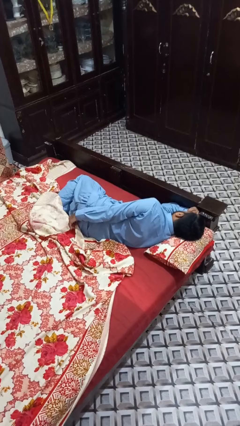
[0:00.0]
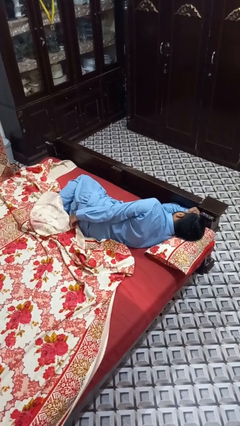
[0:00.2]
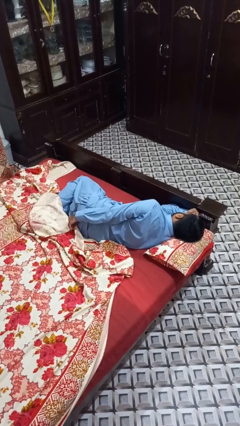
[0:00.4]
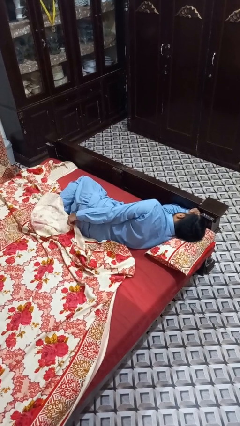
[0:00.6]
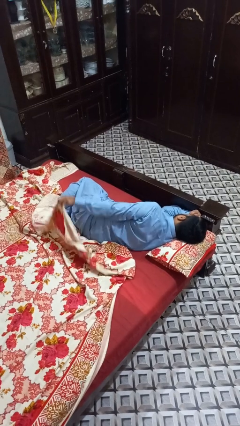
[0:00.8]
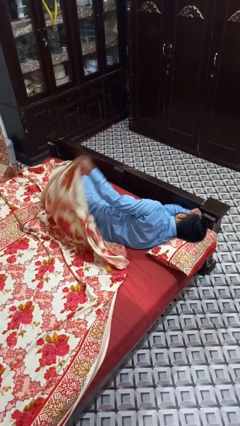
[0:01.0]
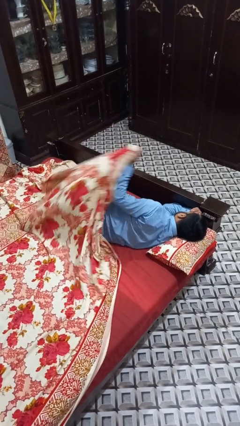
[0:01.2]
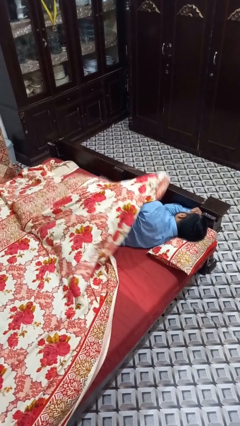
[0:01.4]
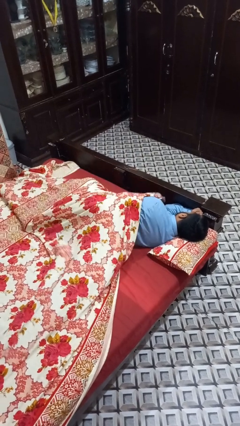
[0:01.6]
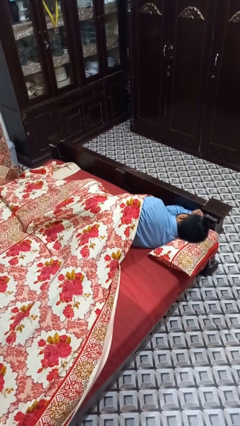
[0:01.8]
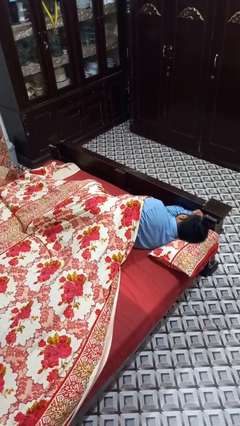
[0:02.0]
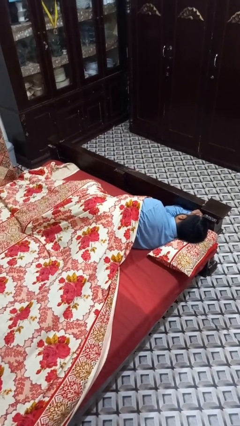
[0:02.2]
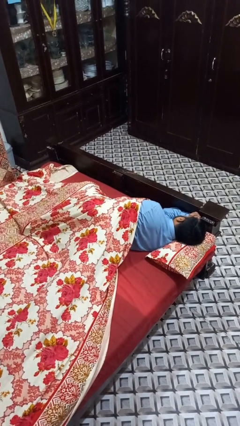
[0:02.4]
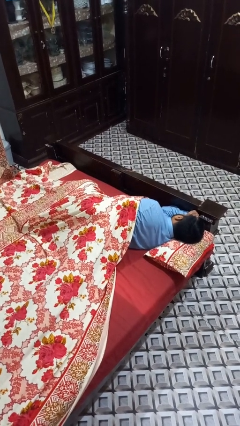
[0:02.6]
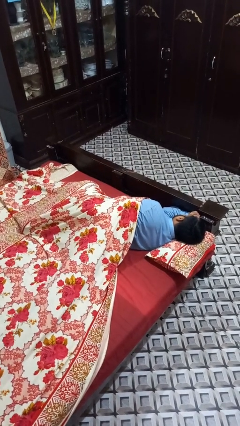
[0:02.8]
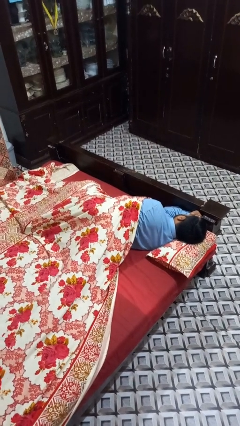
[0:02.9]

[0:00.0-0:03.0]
person covers with bedsheets

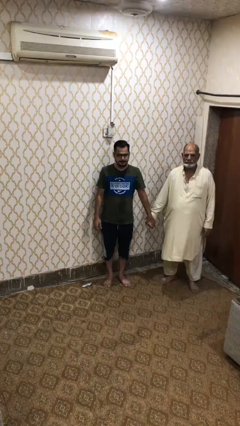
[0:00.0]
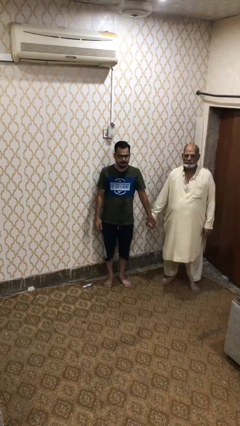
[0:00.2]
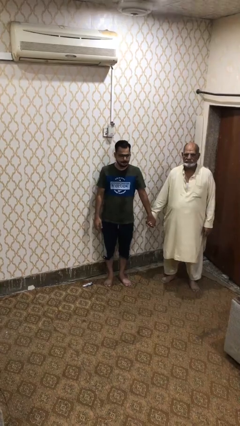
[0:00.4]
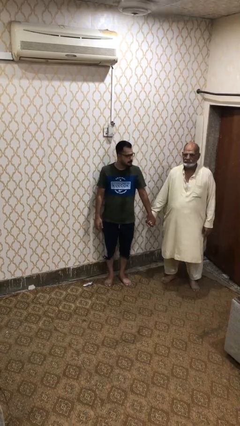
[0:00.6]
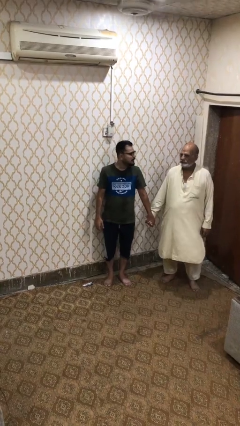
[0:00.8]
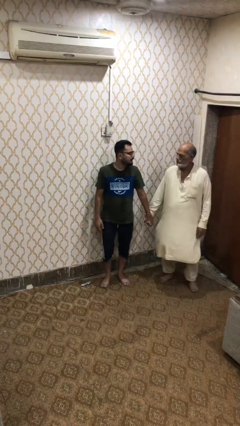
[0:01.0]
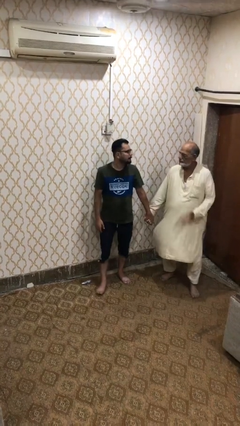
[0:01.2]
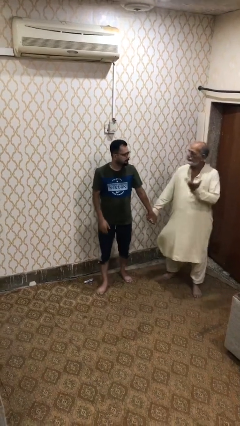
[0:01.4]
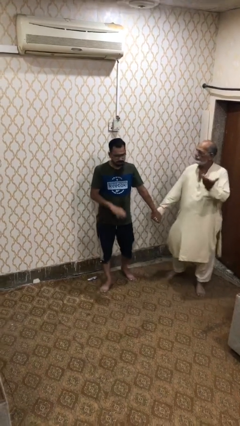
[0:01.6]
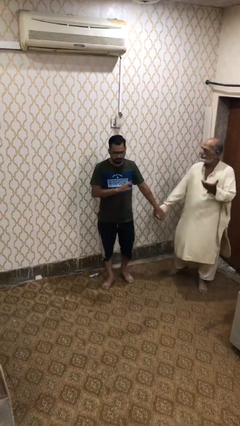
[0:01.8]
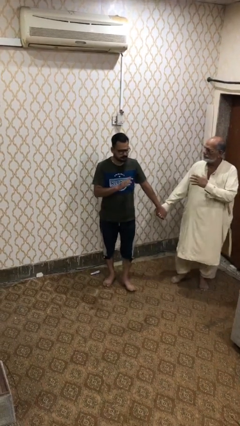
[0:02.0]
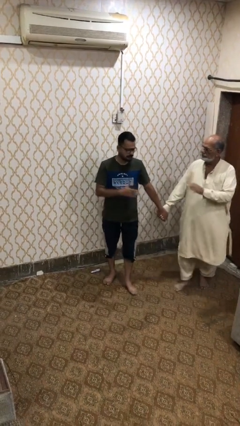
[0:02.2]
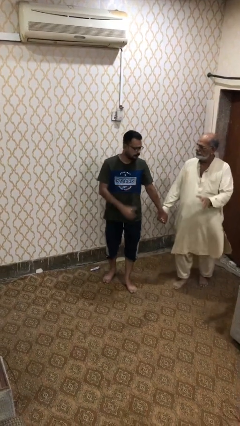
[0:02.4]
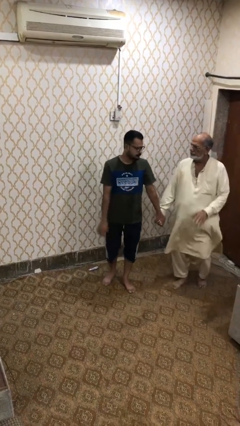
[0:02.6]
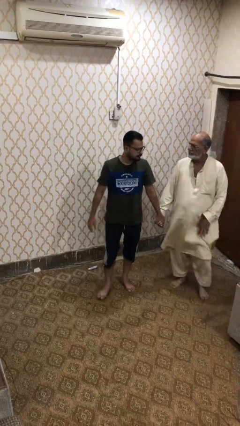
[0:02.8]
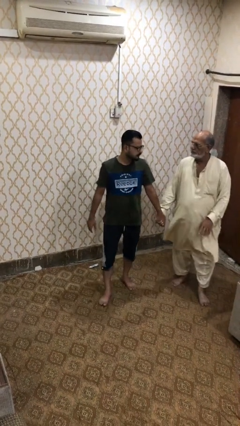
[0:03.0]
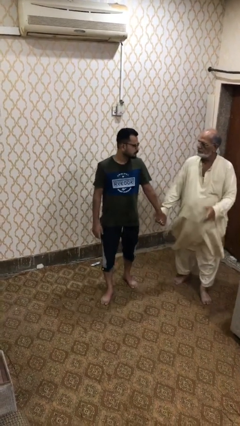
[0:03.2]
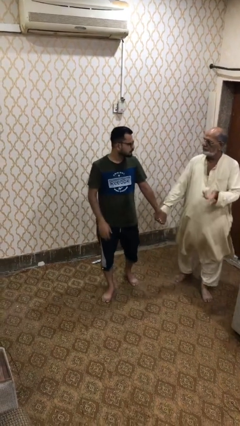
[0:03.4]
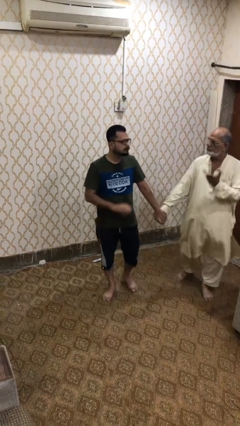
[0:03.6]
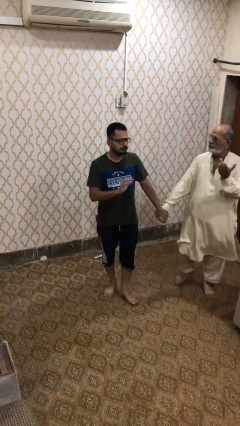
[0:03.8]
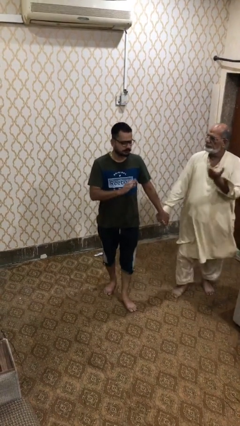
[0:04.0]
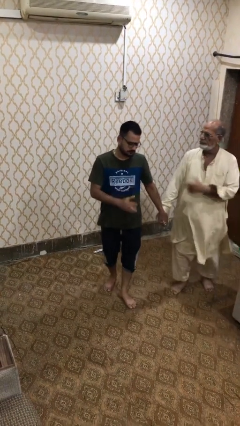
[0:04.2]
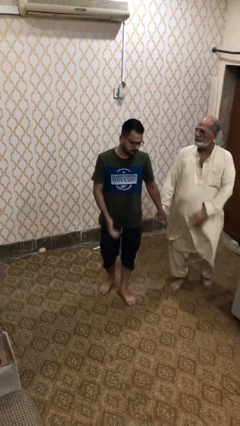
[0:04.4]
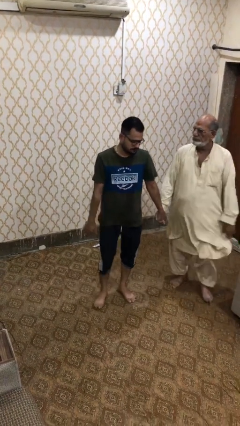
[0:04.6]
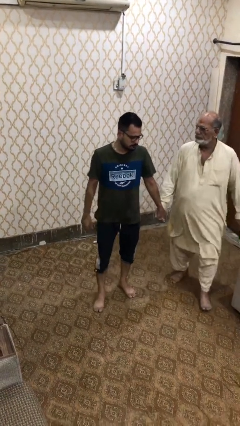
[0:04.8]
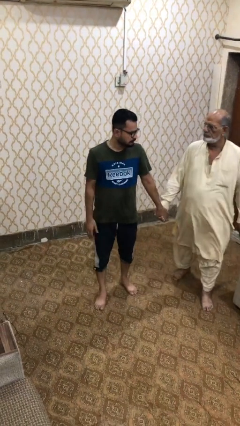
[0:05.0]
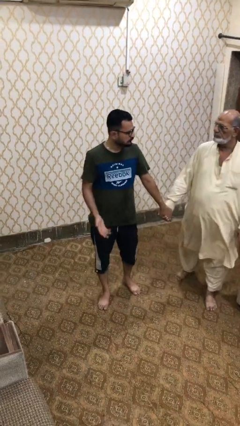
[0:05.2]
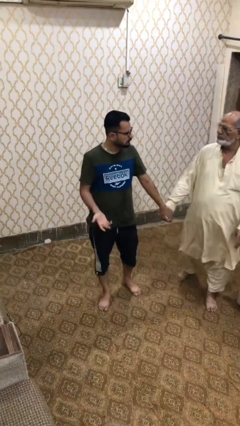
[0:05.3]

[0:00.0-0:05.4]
person holds hand

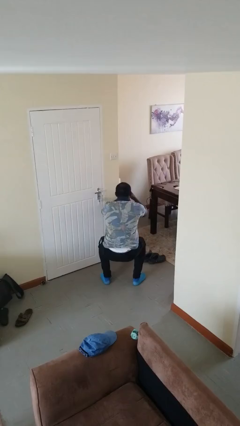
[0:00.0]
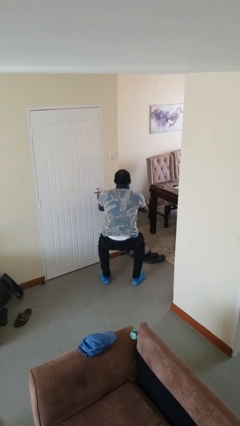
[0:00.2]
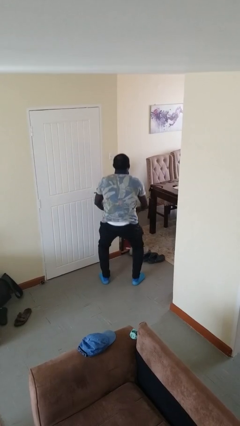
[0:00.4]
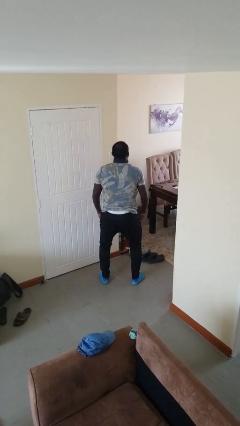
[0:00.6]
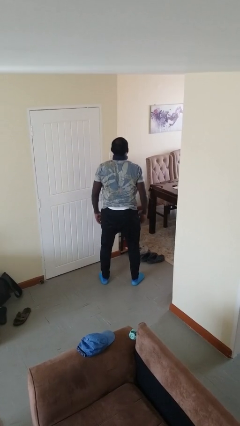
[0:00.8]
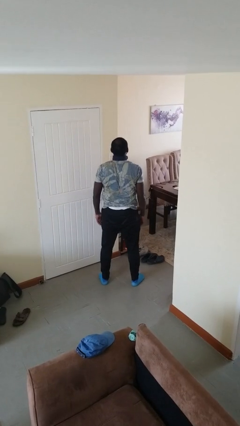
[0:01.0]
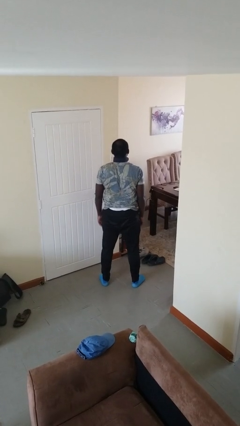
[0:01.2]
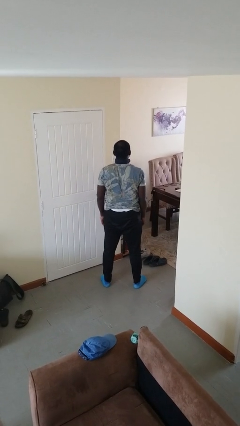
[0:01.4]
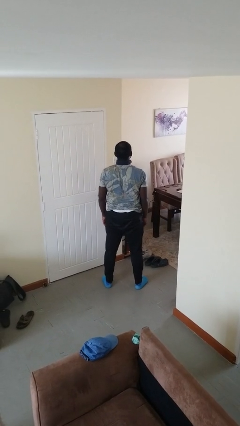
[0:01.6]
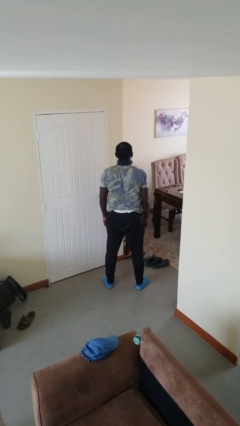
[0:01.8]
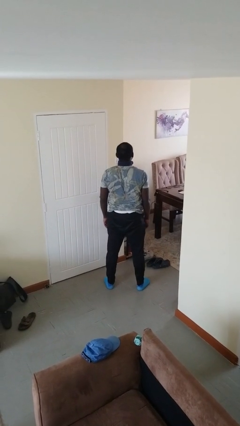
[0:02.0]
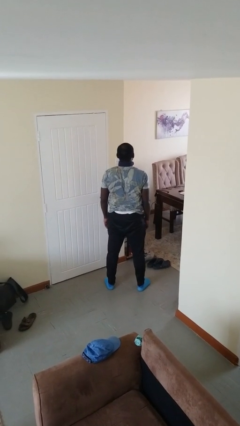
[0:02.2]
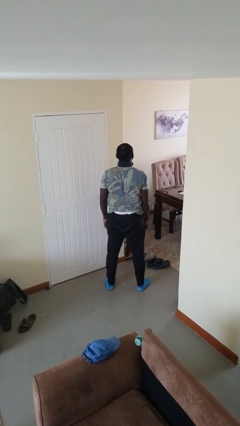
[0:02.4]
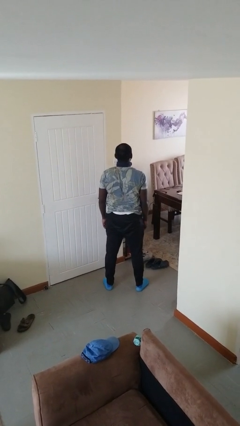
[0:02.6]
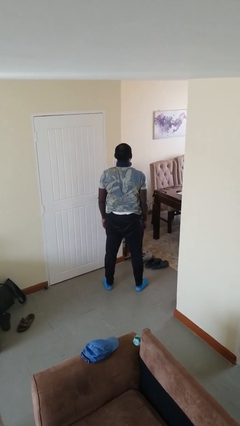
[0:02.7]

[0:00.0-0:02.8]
person stands up

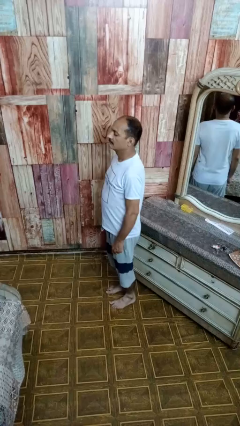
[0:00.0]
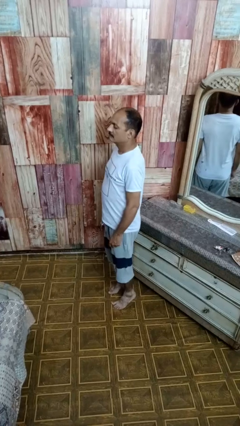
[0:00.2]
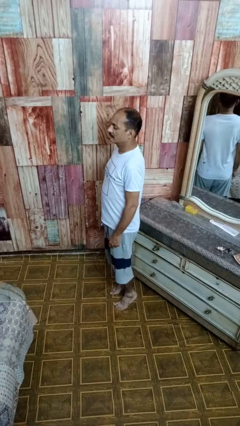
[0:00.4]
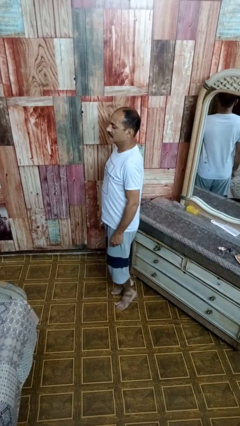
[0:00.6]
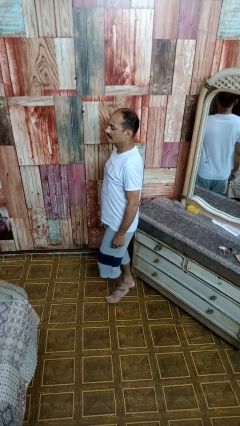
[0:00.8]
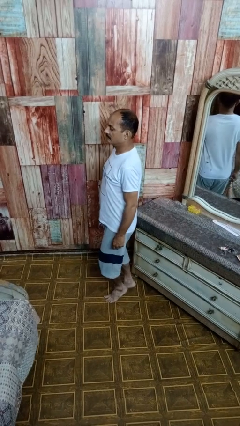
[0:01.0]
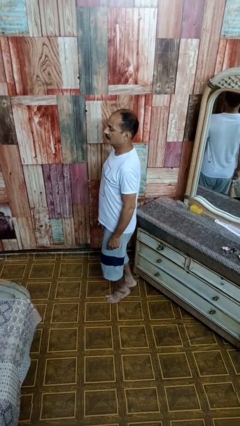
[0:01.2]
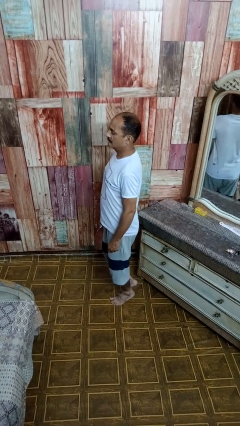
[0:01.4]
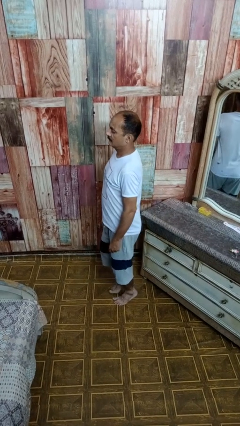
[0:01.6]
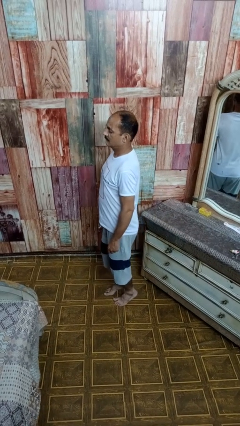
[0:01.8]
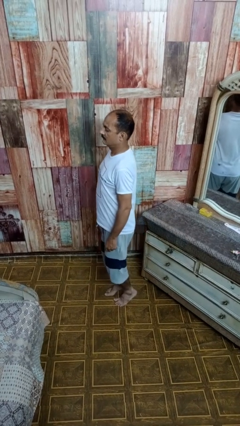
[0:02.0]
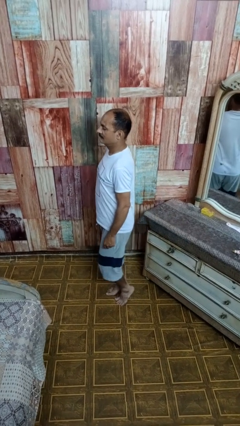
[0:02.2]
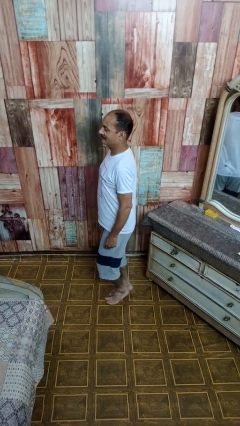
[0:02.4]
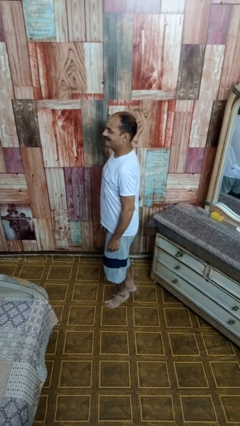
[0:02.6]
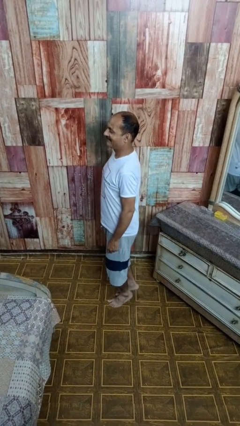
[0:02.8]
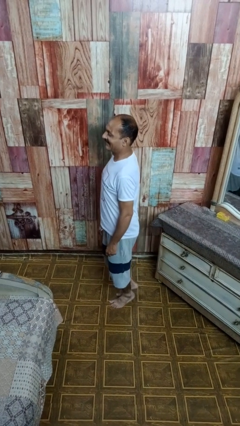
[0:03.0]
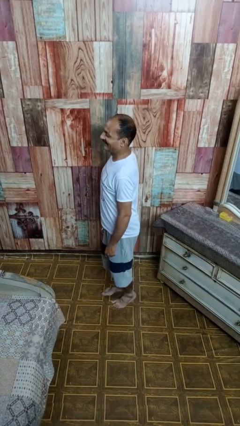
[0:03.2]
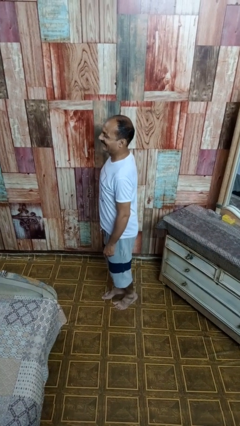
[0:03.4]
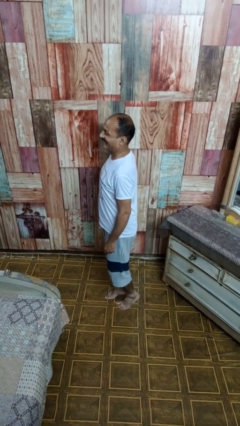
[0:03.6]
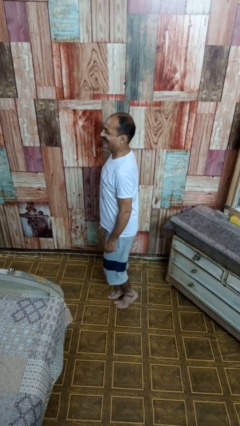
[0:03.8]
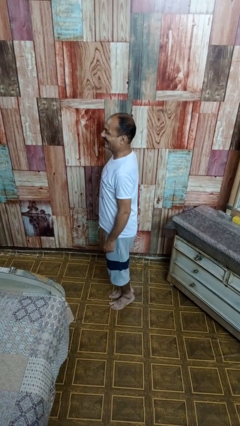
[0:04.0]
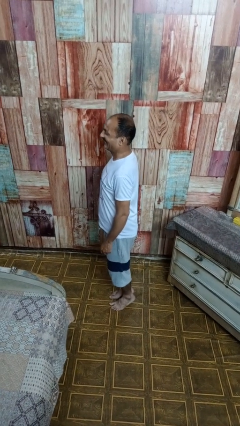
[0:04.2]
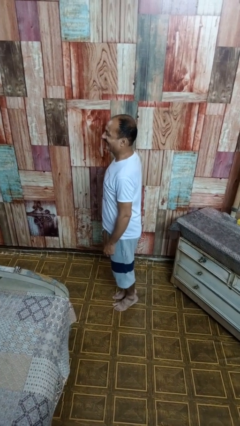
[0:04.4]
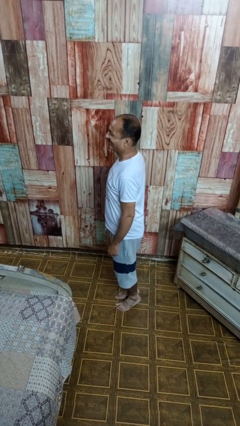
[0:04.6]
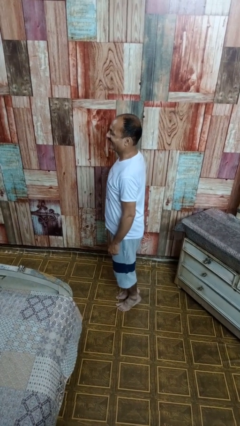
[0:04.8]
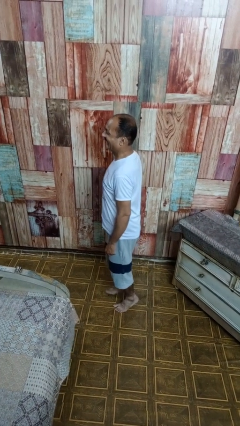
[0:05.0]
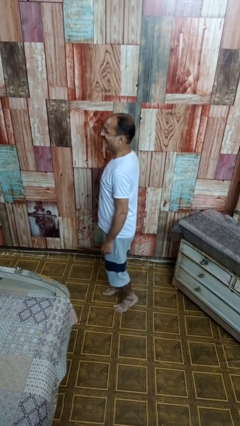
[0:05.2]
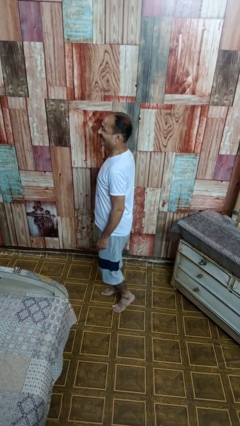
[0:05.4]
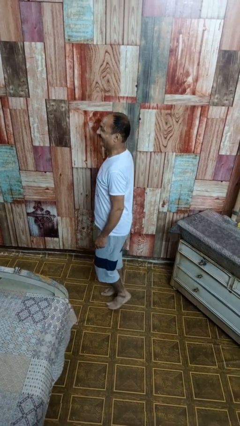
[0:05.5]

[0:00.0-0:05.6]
person walks tiptoe

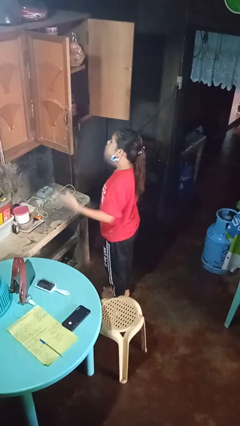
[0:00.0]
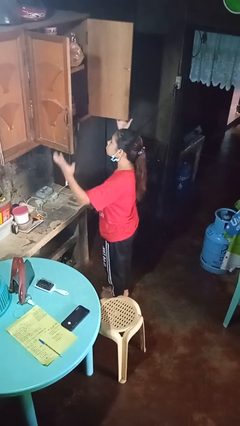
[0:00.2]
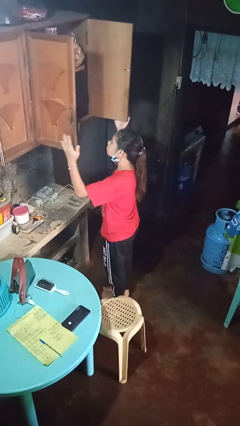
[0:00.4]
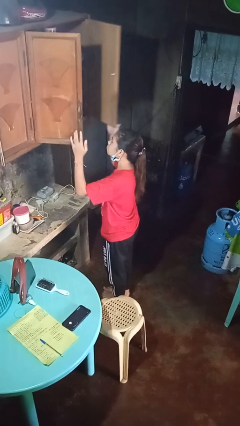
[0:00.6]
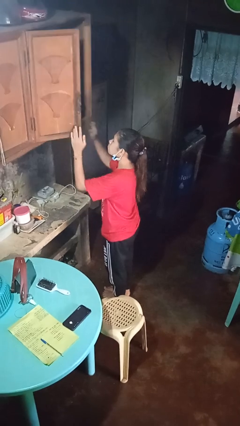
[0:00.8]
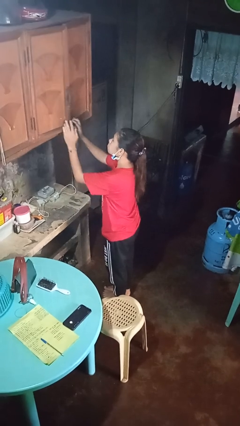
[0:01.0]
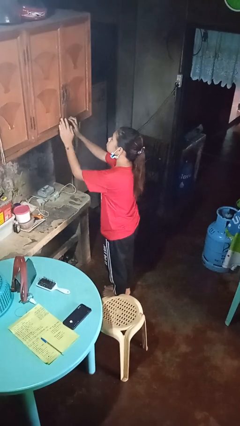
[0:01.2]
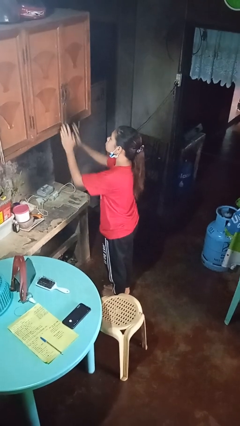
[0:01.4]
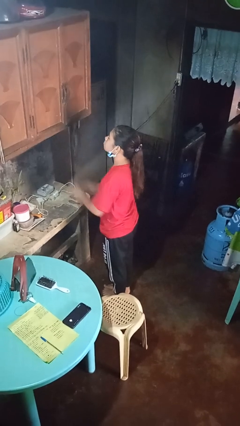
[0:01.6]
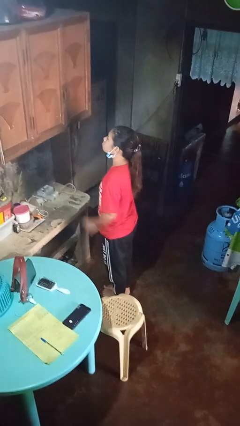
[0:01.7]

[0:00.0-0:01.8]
person closes cabinet
